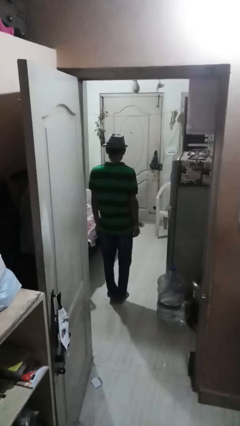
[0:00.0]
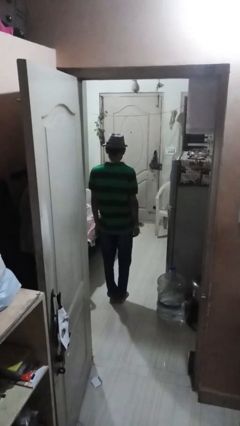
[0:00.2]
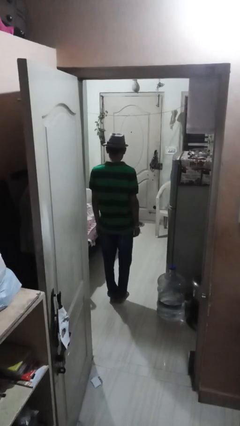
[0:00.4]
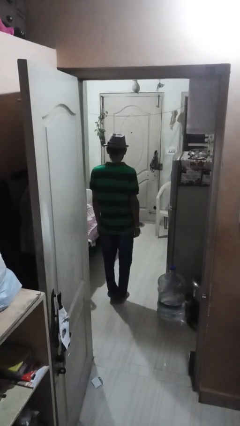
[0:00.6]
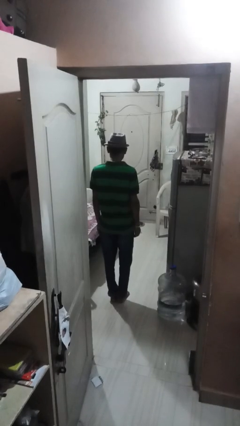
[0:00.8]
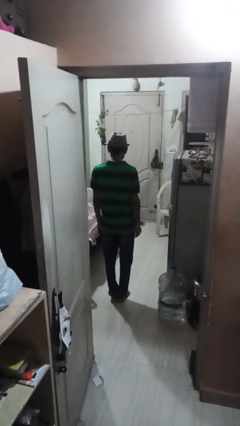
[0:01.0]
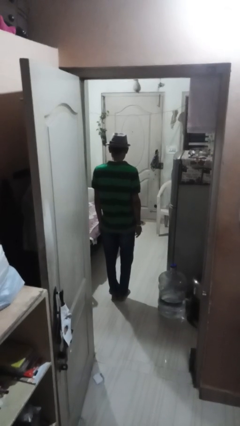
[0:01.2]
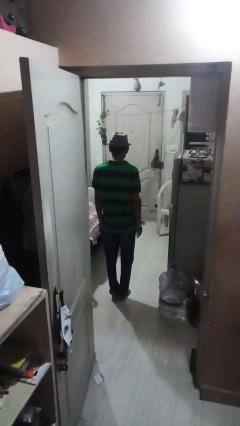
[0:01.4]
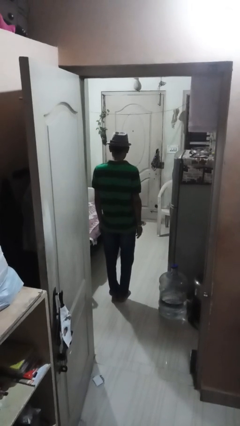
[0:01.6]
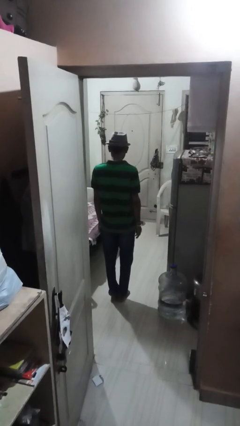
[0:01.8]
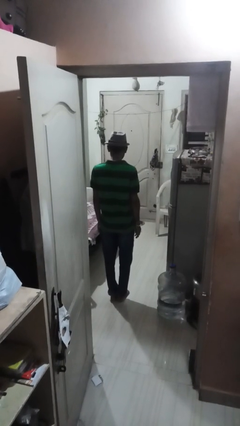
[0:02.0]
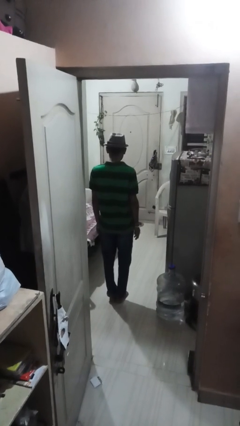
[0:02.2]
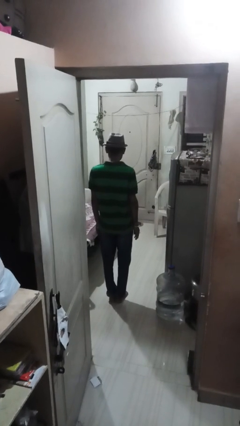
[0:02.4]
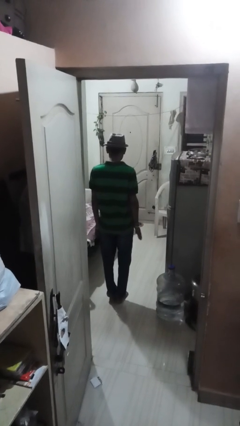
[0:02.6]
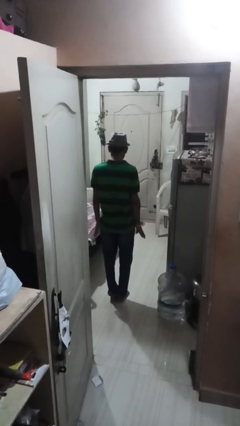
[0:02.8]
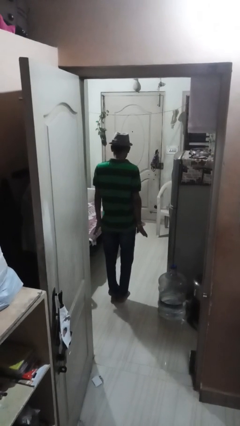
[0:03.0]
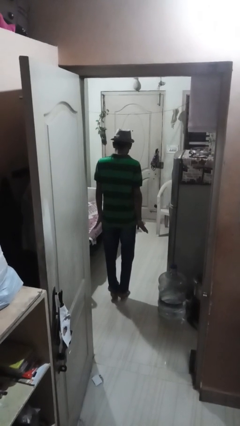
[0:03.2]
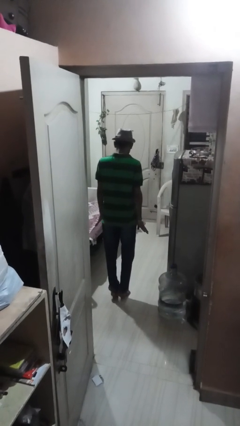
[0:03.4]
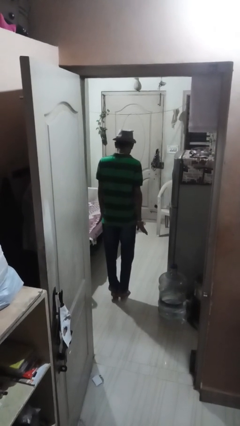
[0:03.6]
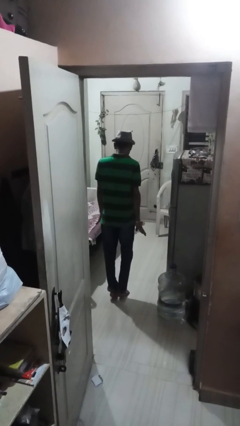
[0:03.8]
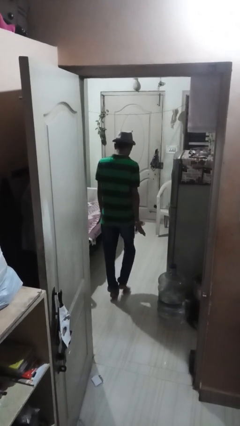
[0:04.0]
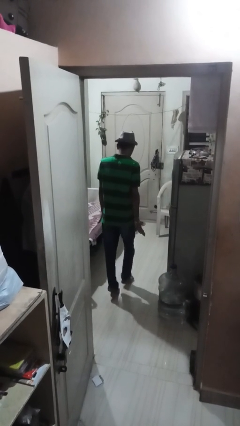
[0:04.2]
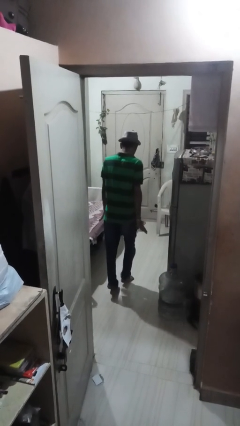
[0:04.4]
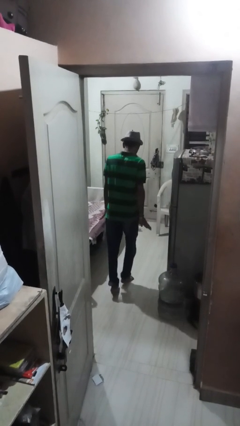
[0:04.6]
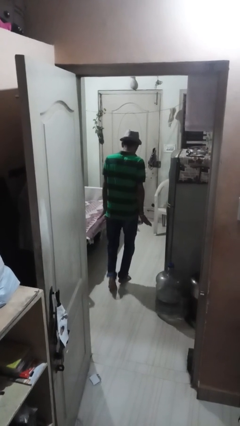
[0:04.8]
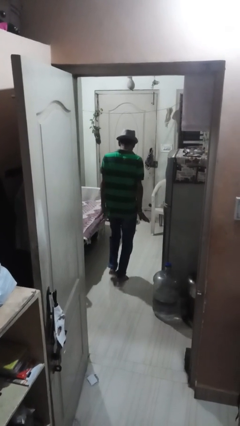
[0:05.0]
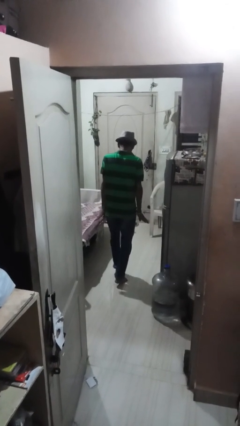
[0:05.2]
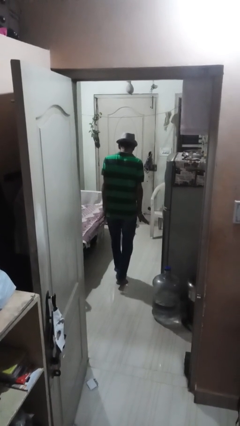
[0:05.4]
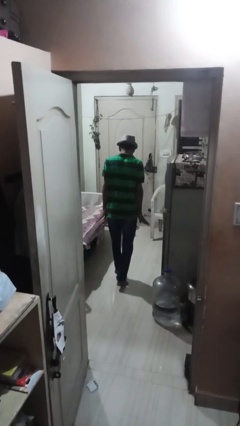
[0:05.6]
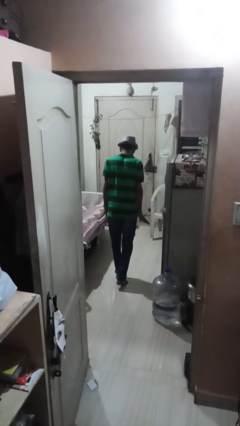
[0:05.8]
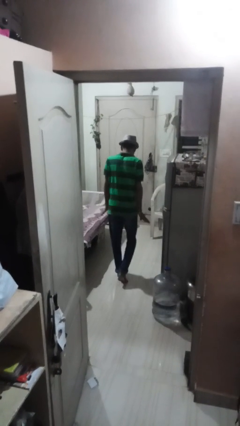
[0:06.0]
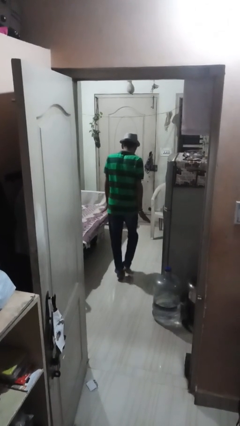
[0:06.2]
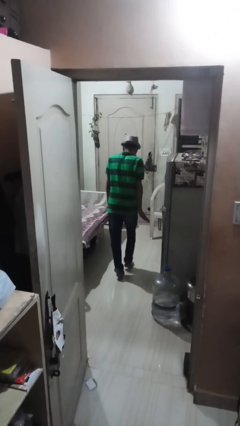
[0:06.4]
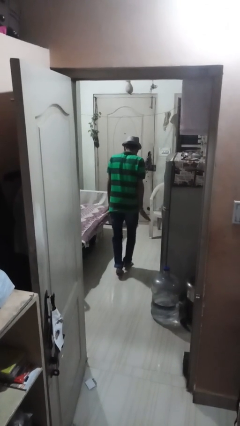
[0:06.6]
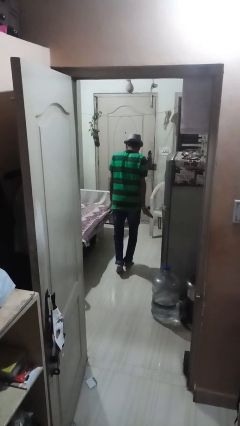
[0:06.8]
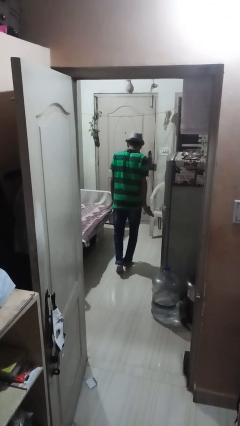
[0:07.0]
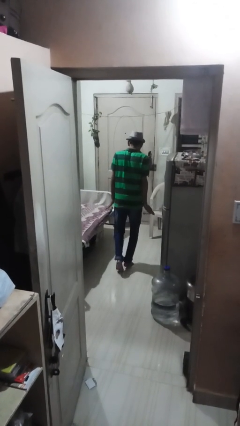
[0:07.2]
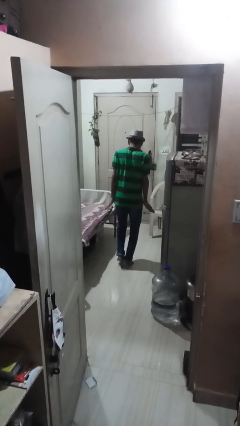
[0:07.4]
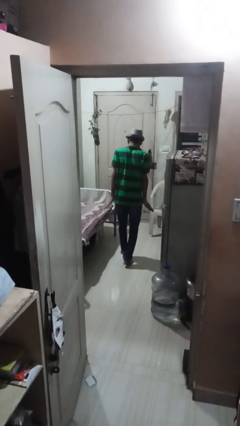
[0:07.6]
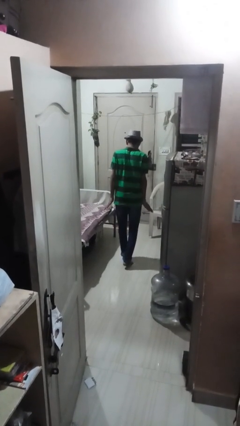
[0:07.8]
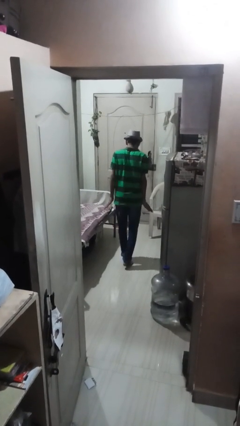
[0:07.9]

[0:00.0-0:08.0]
person walks tiptoe

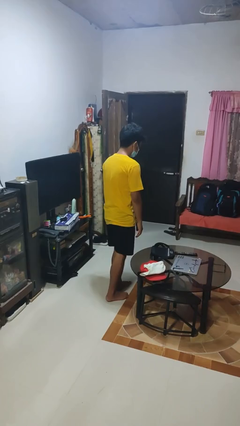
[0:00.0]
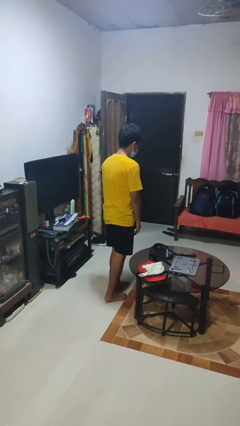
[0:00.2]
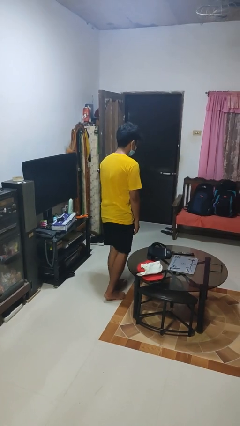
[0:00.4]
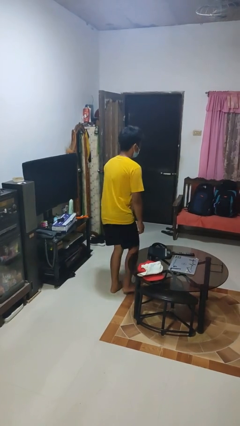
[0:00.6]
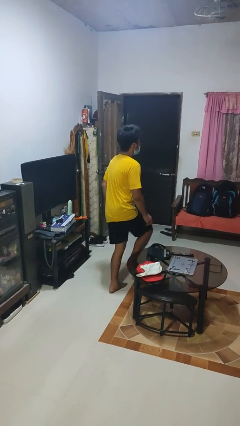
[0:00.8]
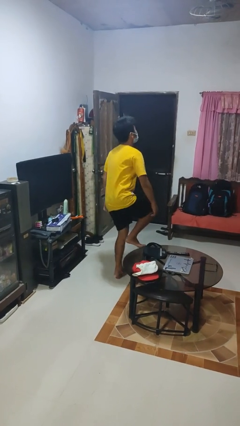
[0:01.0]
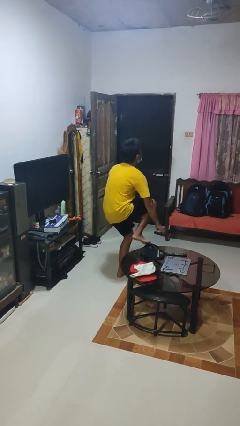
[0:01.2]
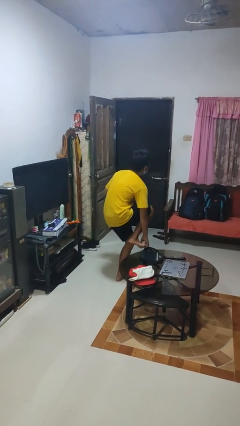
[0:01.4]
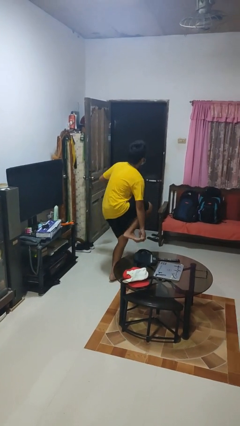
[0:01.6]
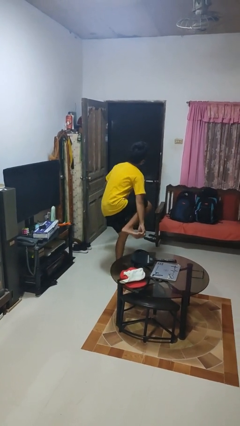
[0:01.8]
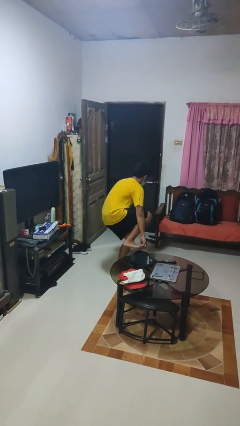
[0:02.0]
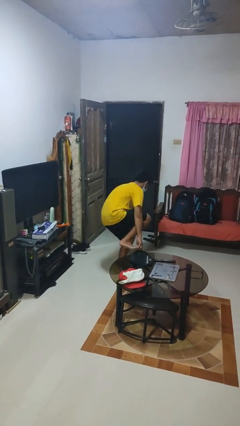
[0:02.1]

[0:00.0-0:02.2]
person trips on object on floor

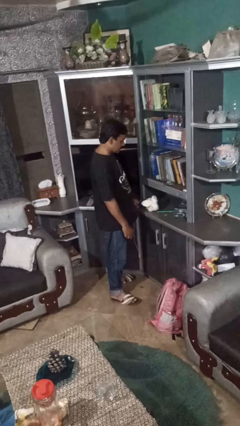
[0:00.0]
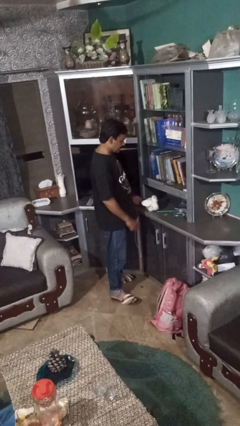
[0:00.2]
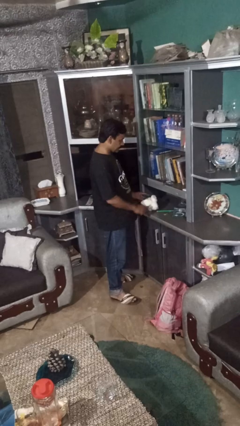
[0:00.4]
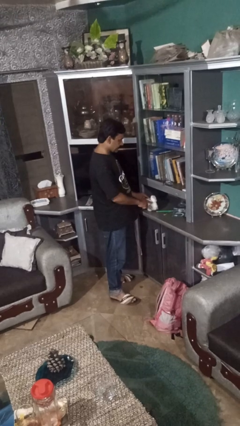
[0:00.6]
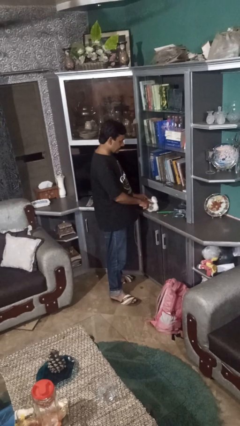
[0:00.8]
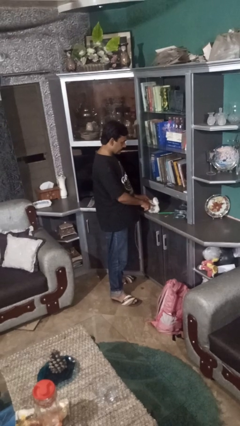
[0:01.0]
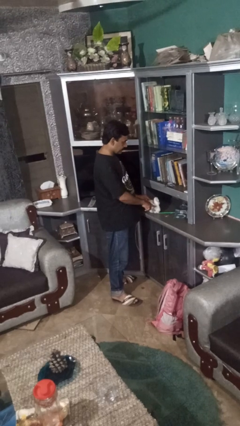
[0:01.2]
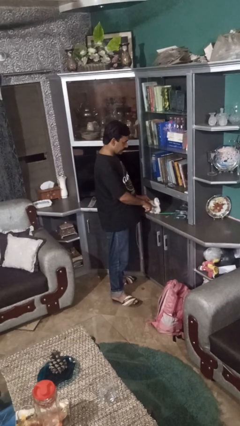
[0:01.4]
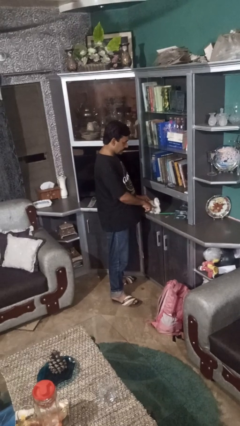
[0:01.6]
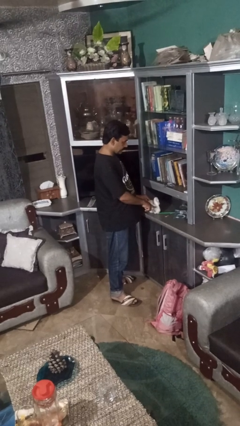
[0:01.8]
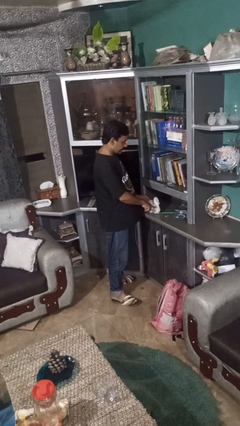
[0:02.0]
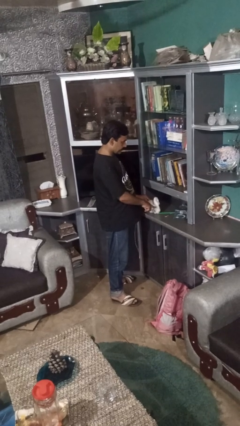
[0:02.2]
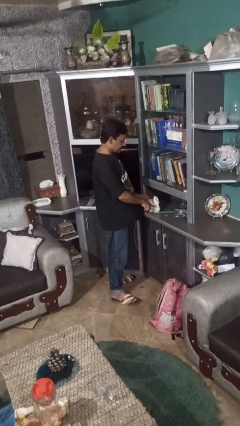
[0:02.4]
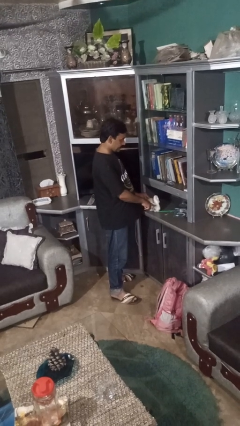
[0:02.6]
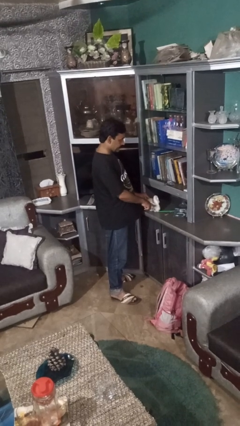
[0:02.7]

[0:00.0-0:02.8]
person taps object with finger

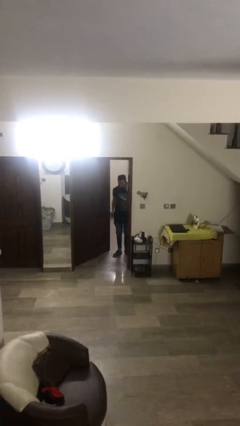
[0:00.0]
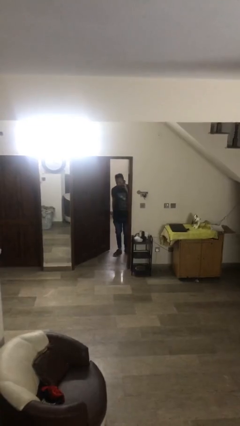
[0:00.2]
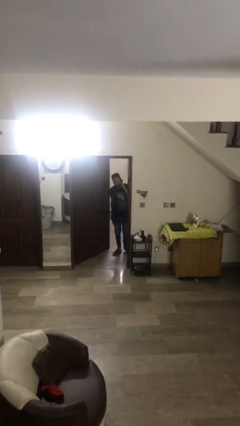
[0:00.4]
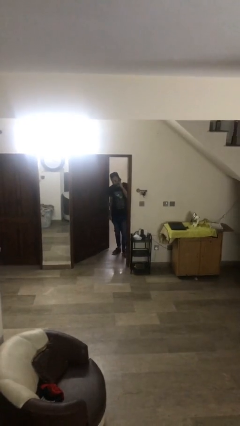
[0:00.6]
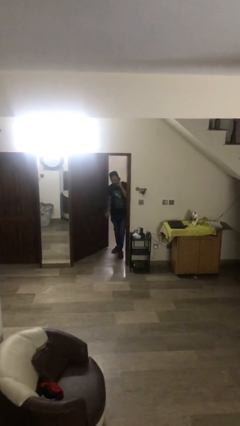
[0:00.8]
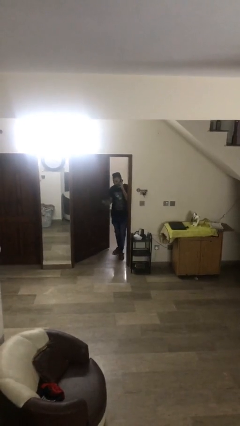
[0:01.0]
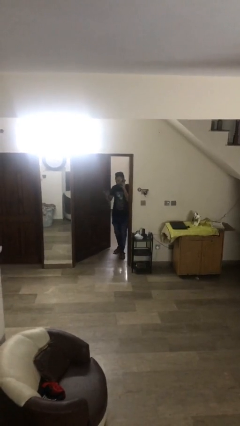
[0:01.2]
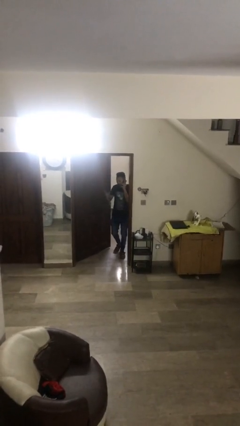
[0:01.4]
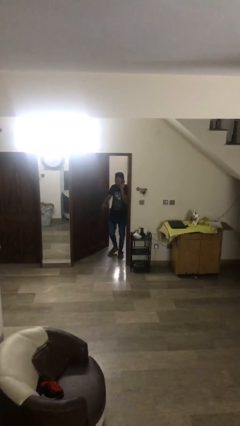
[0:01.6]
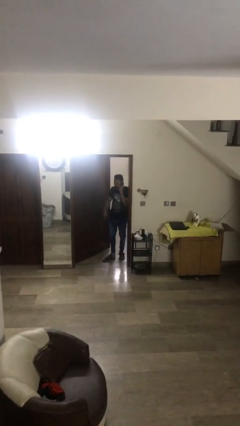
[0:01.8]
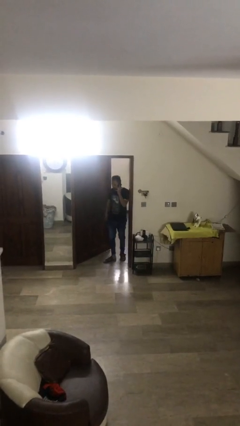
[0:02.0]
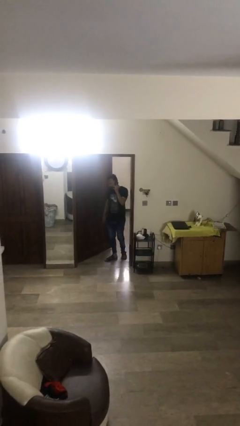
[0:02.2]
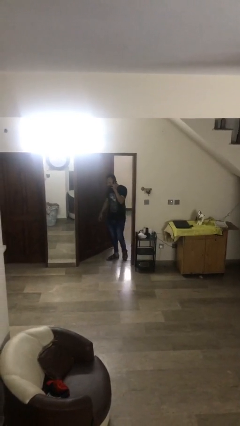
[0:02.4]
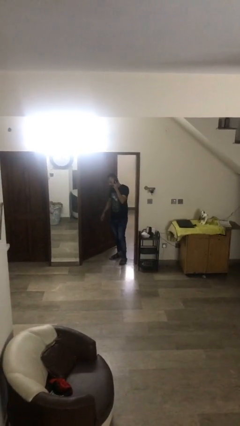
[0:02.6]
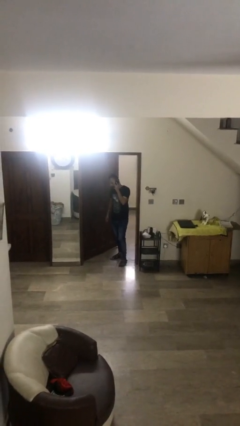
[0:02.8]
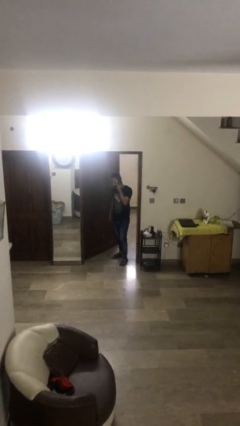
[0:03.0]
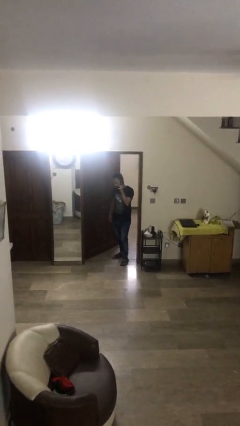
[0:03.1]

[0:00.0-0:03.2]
person enters scene through structure

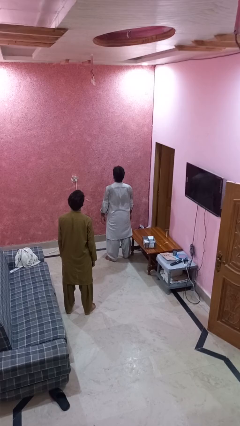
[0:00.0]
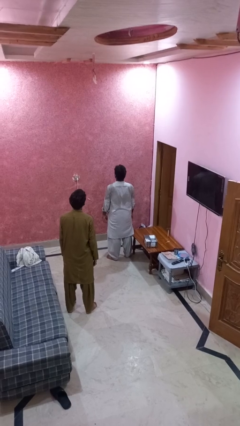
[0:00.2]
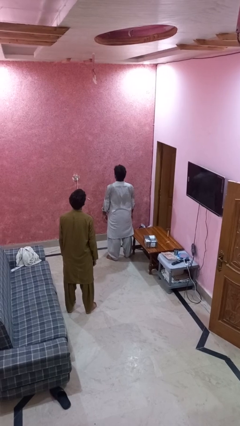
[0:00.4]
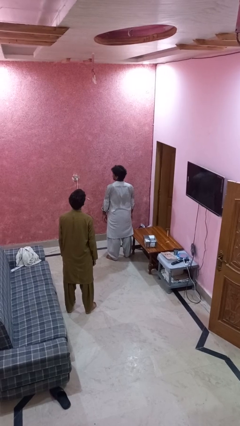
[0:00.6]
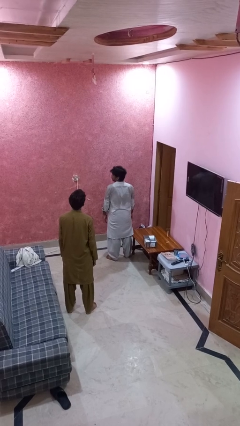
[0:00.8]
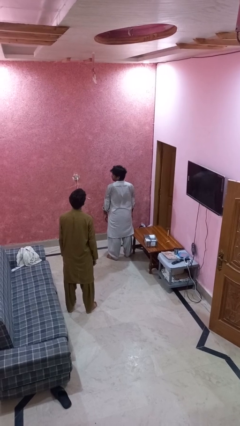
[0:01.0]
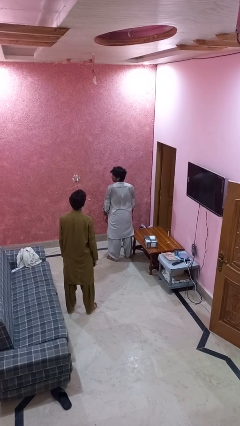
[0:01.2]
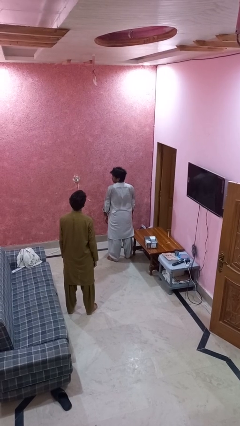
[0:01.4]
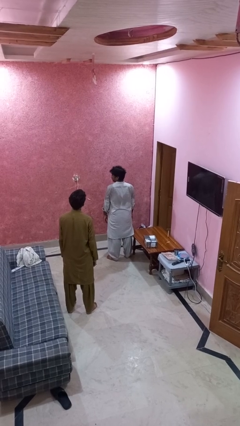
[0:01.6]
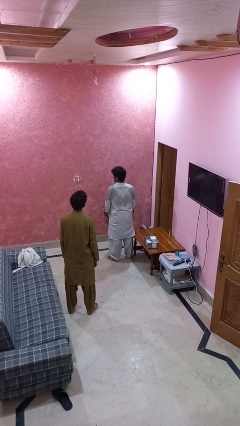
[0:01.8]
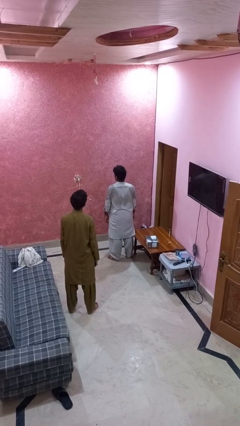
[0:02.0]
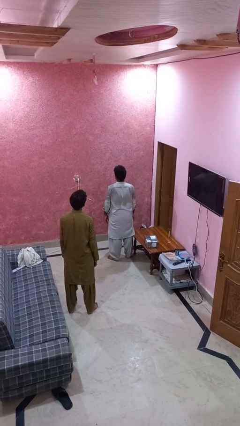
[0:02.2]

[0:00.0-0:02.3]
person looks over shoulder
